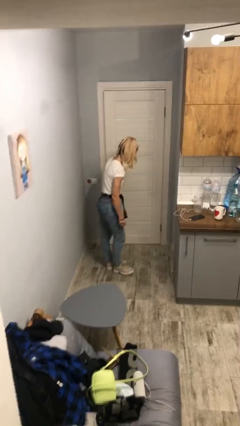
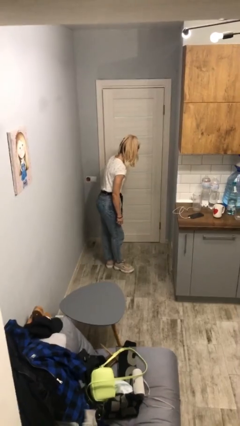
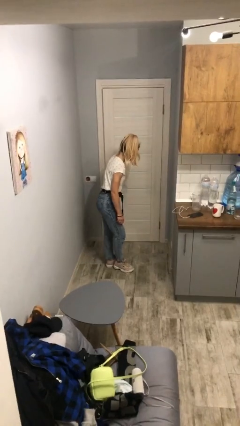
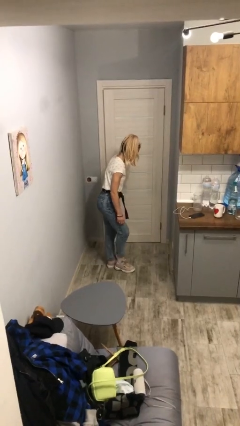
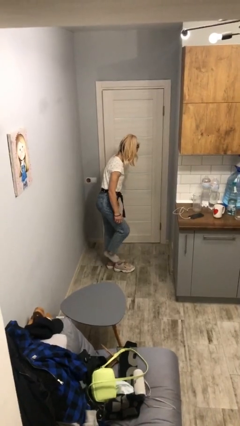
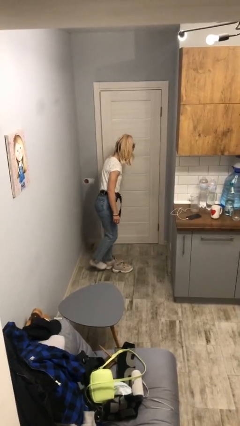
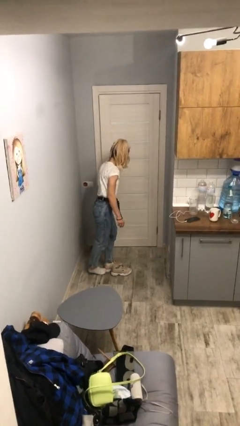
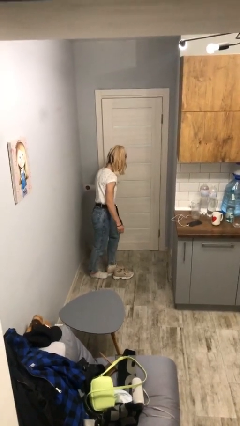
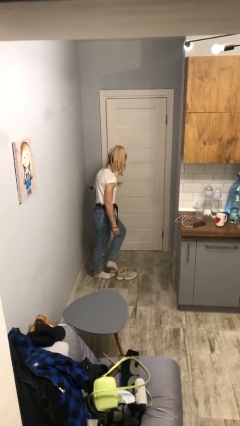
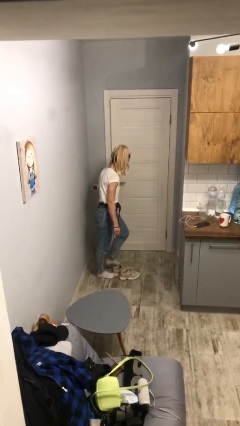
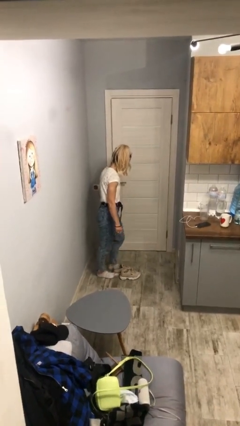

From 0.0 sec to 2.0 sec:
person takes off shoes

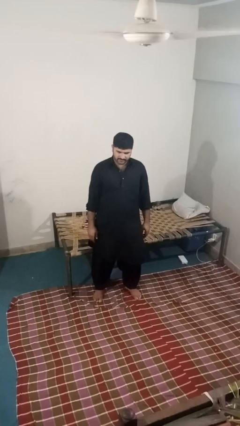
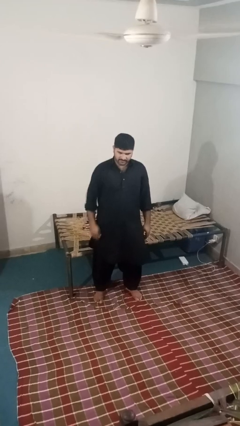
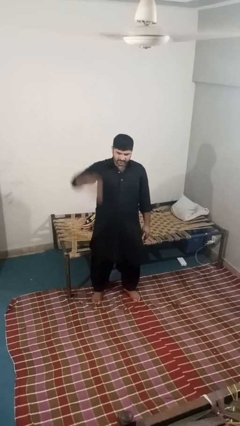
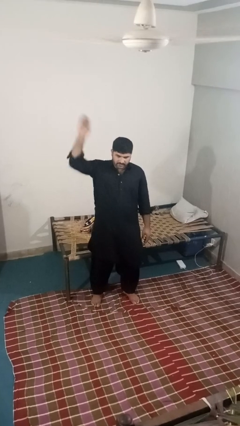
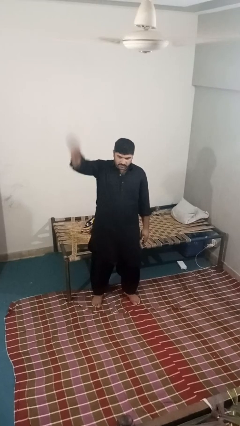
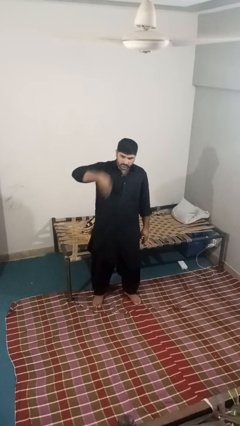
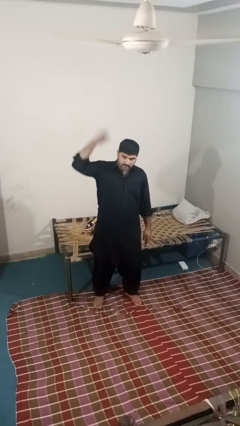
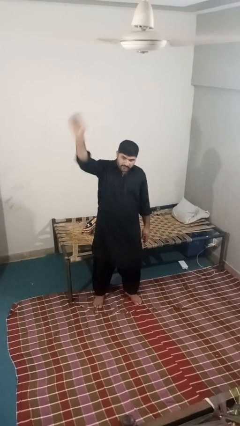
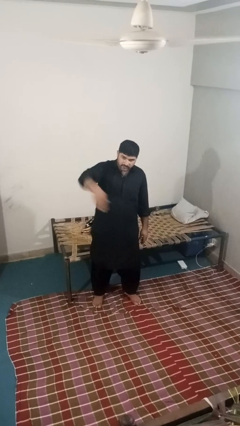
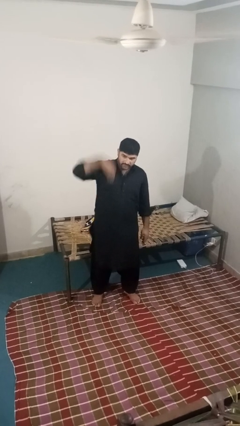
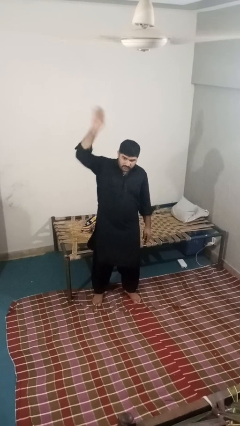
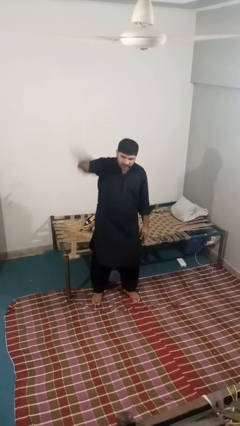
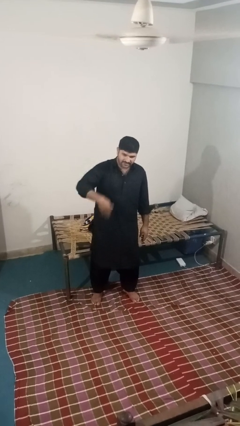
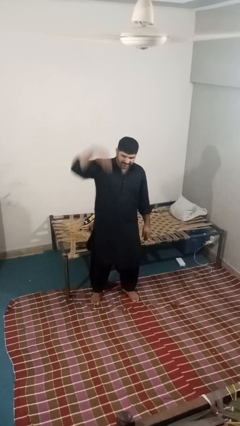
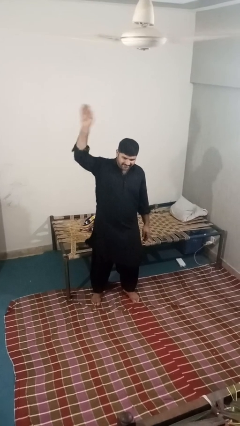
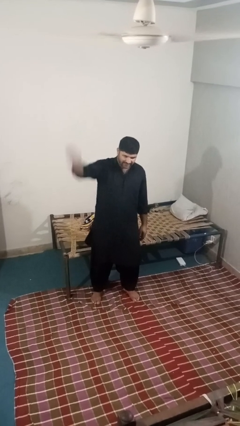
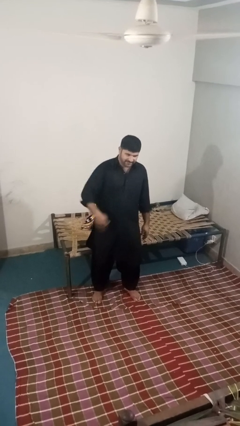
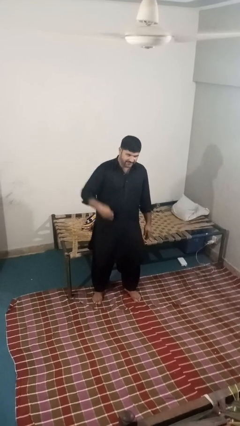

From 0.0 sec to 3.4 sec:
person gestures come here

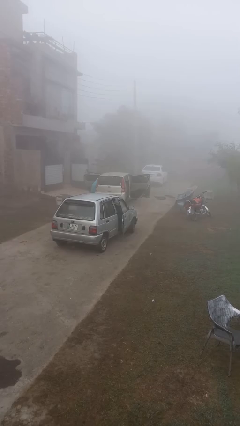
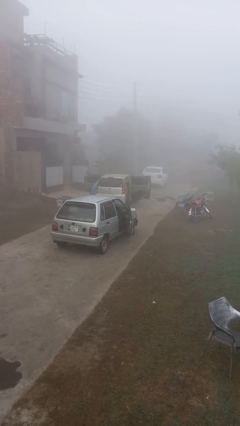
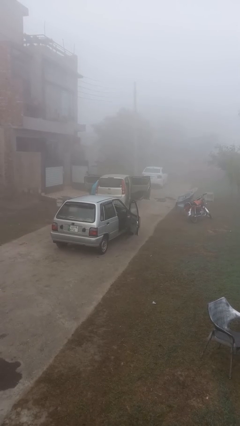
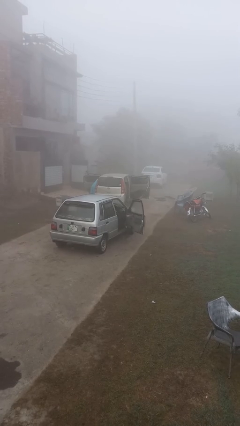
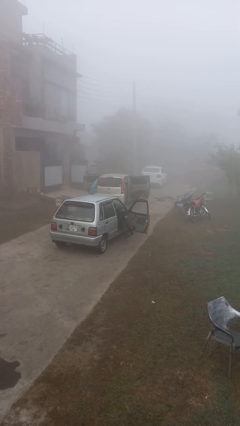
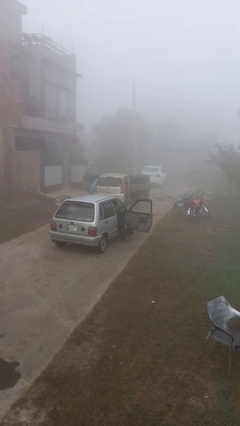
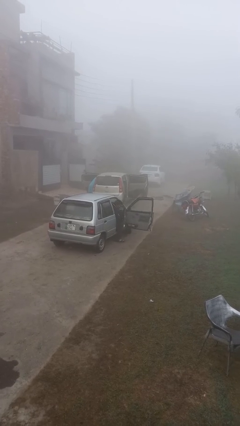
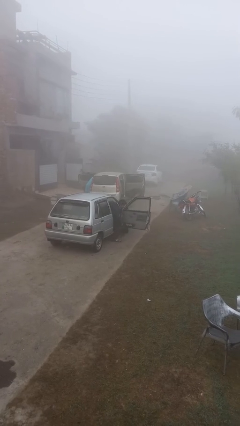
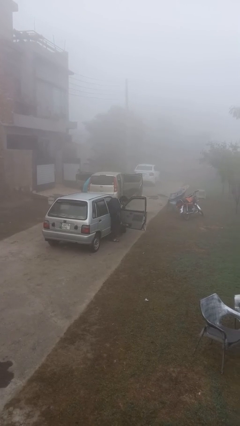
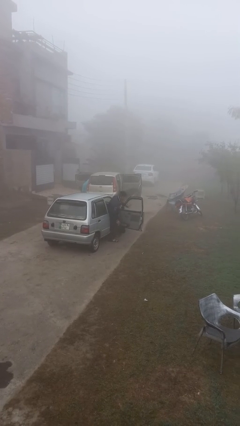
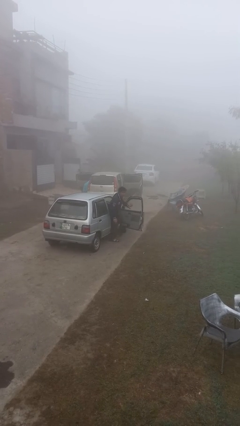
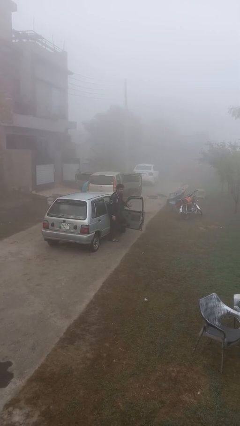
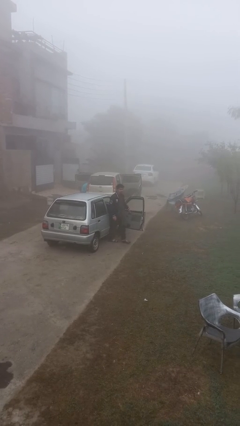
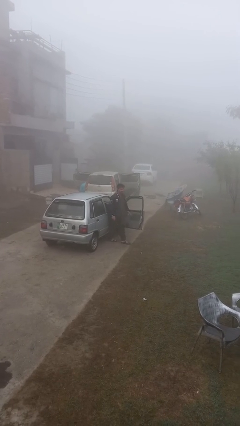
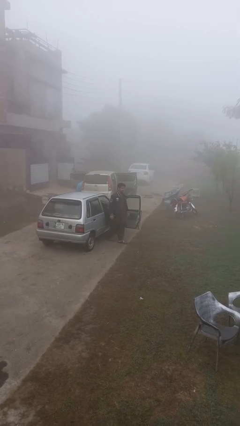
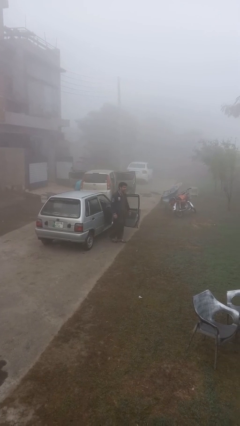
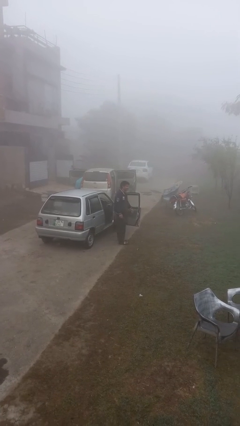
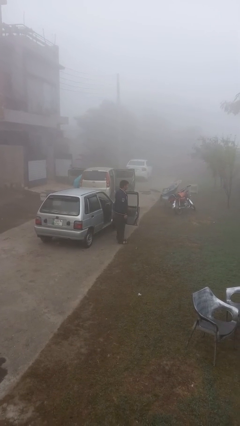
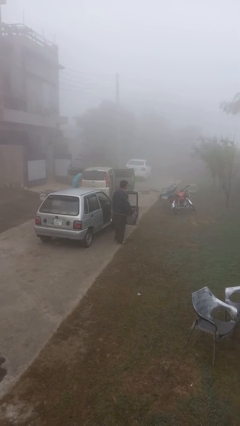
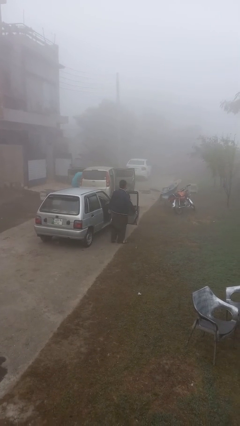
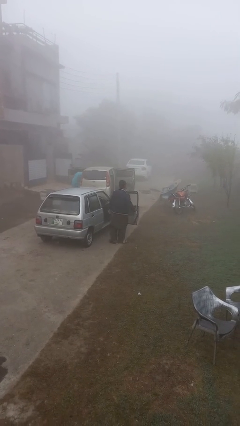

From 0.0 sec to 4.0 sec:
person exits car

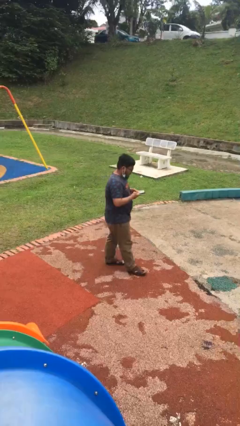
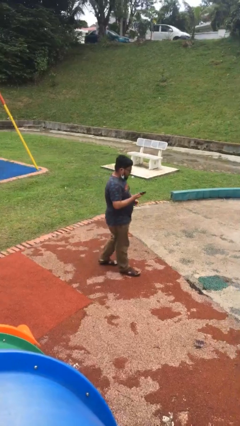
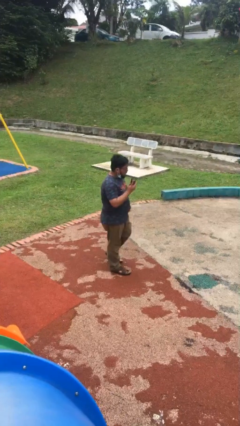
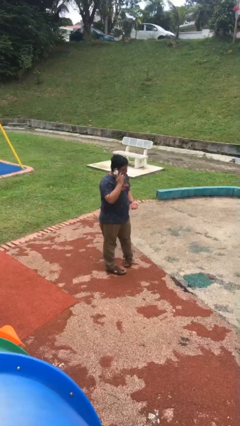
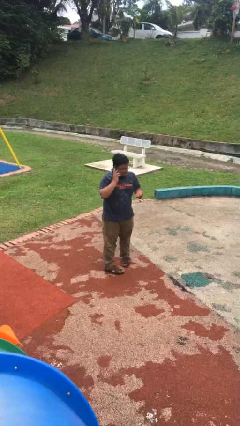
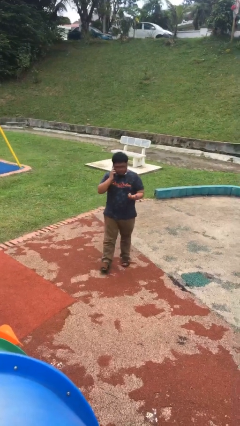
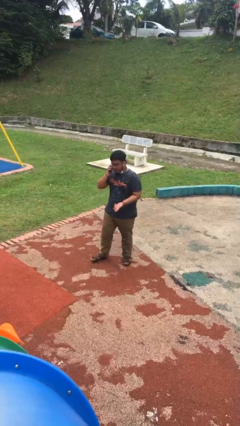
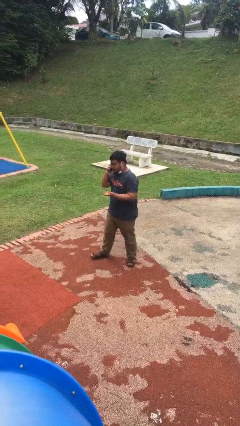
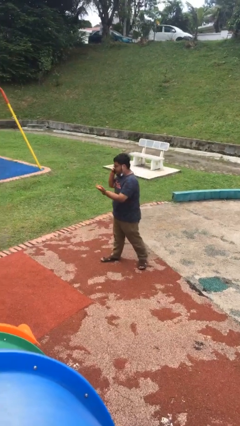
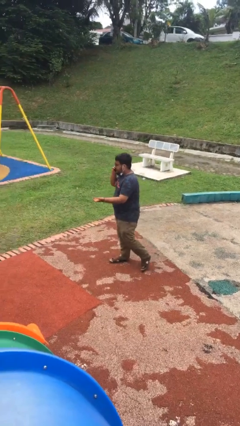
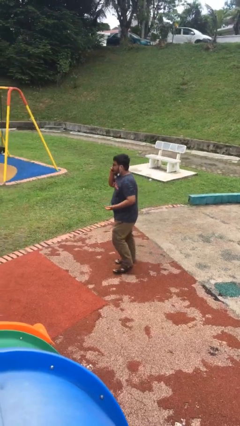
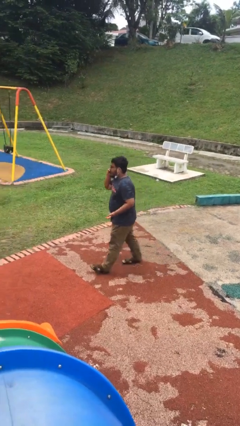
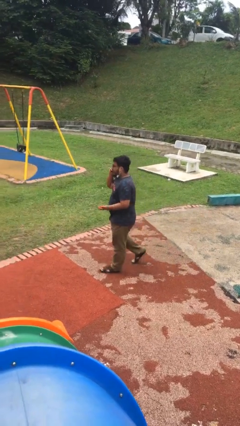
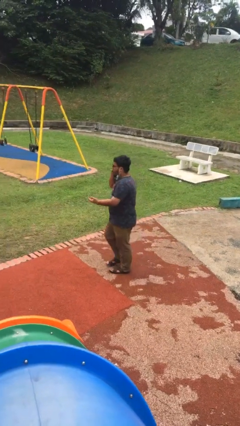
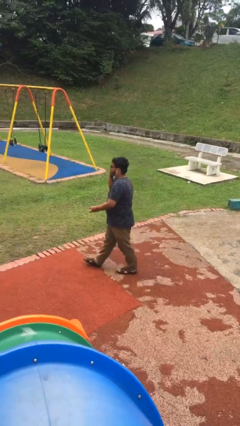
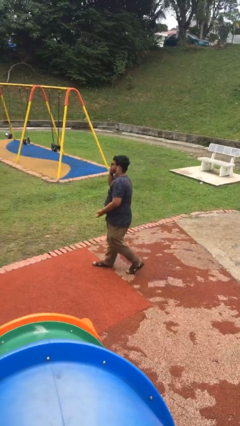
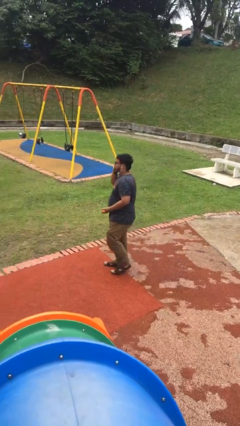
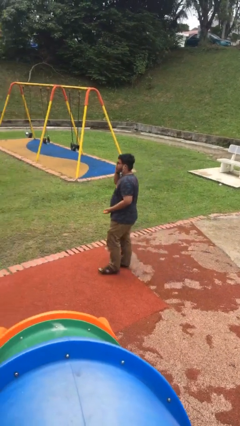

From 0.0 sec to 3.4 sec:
person talks on phone

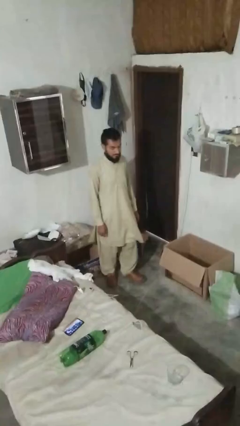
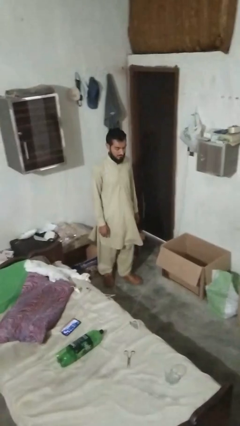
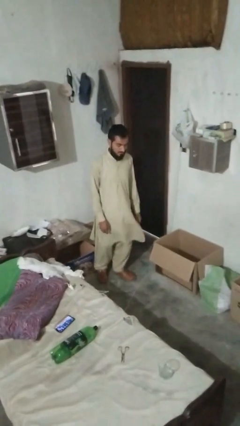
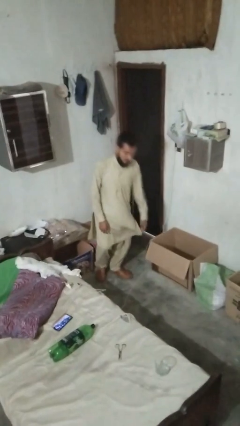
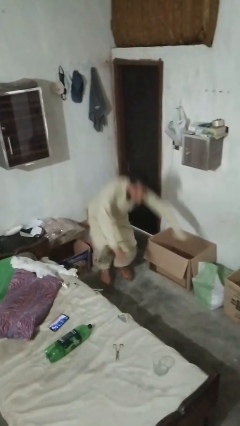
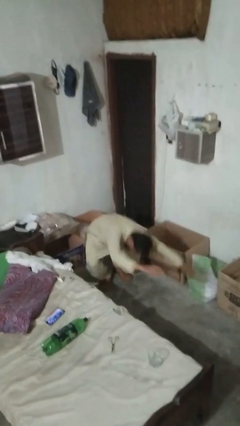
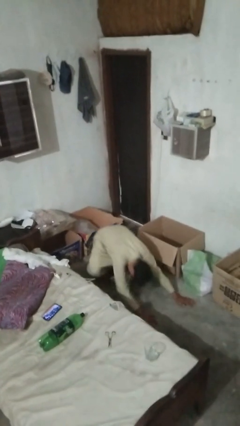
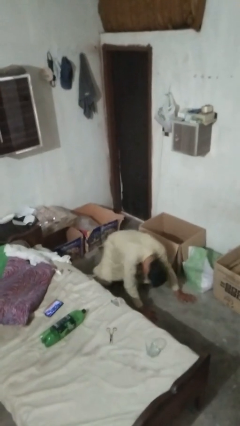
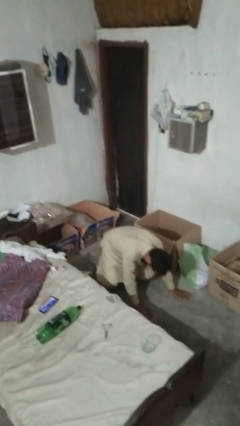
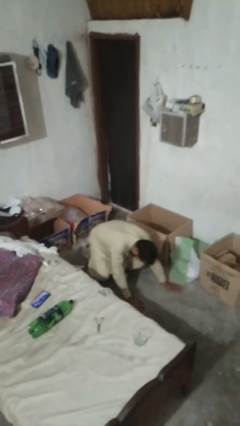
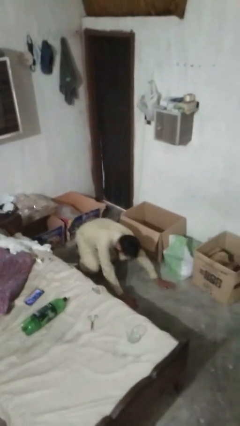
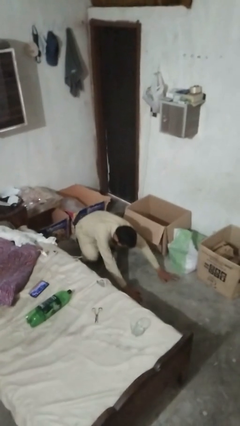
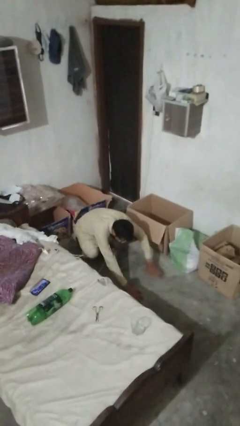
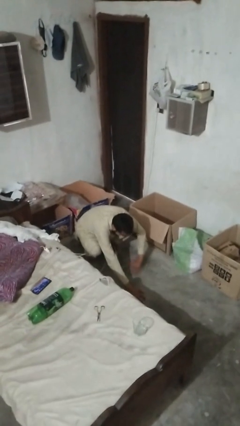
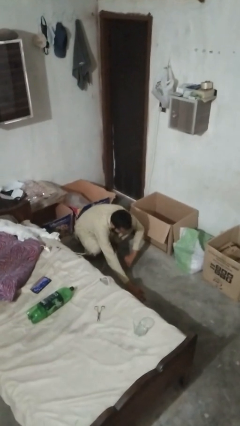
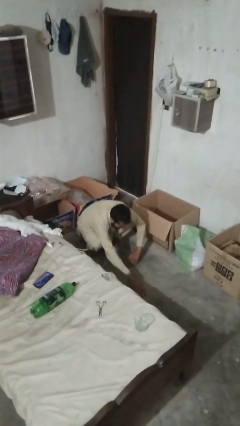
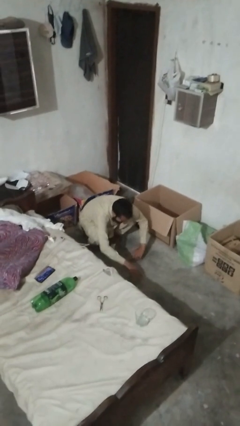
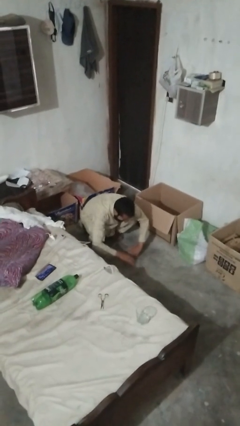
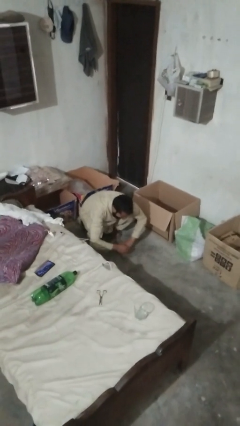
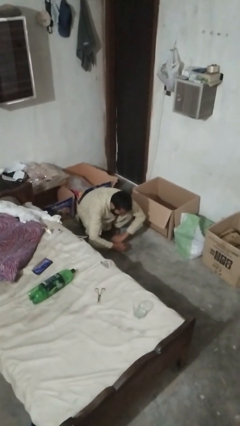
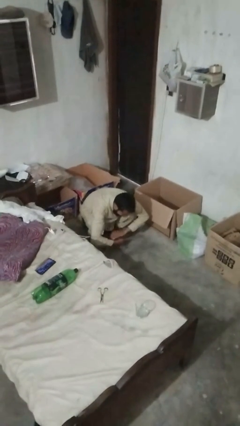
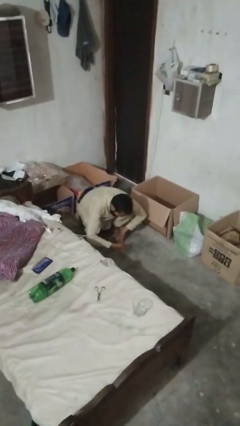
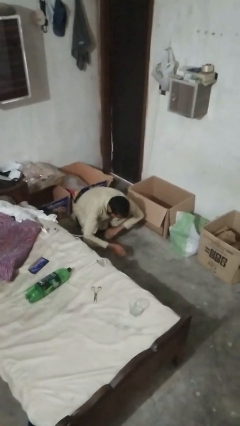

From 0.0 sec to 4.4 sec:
person trips on object on floor

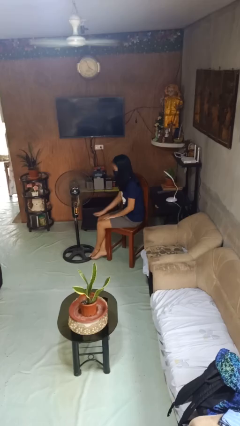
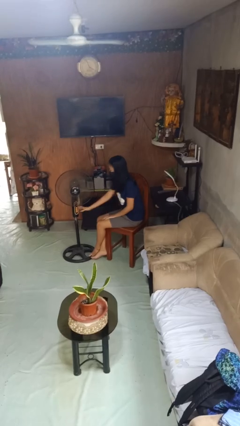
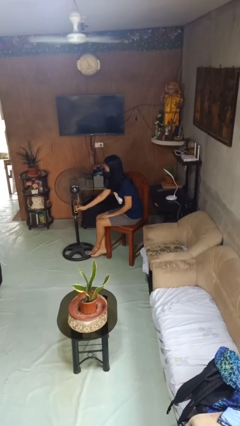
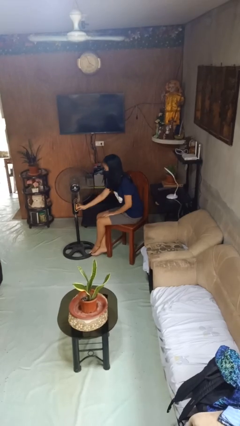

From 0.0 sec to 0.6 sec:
person turns on fan
